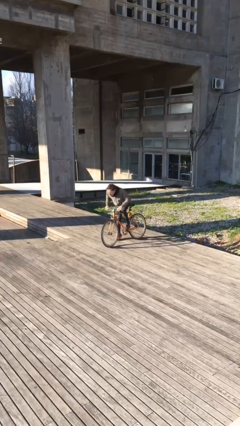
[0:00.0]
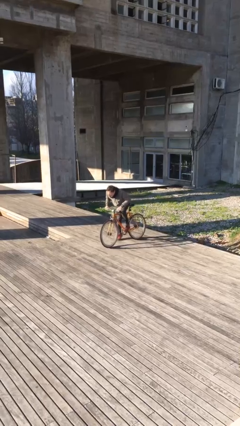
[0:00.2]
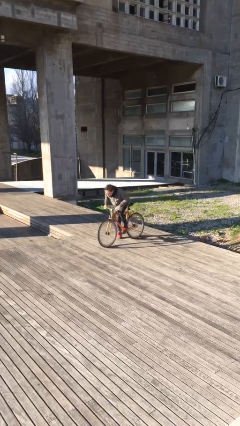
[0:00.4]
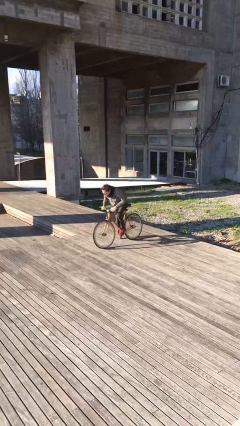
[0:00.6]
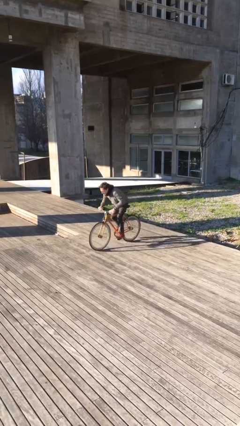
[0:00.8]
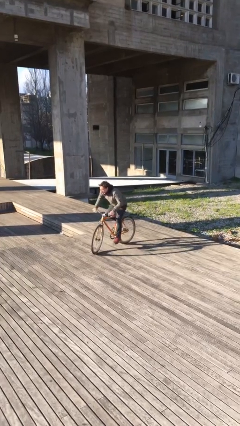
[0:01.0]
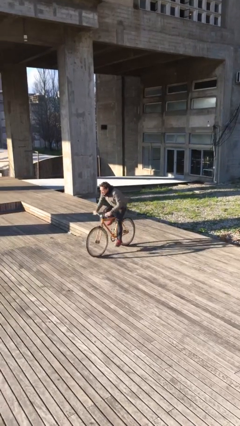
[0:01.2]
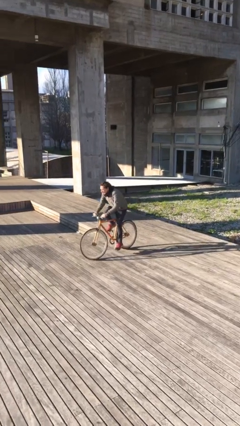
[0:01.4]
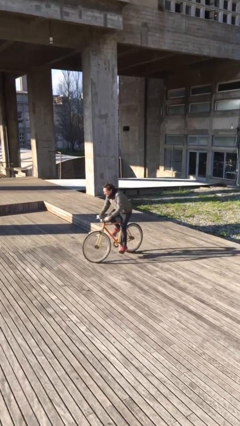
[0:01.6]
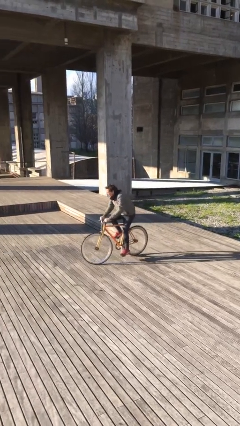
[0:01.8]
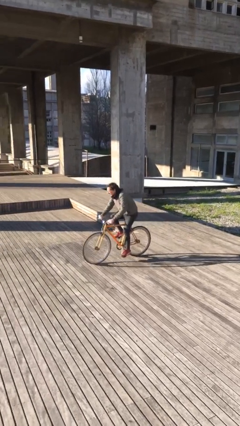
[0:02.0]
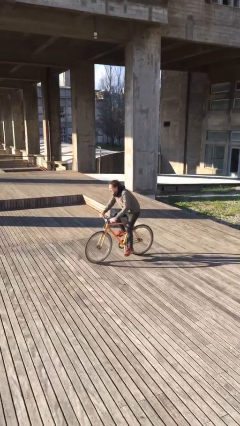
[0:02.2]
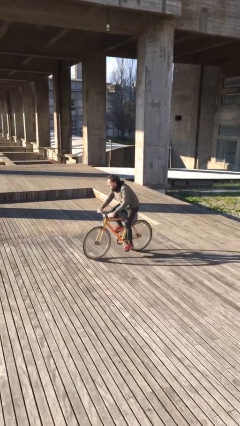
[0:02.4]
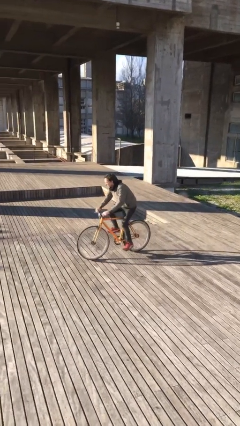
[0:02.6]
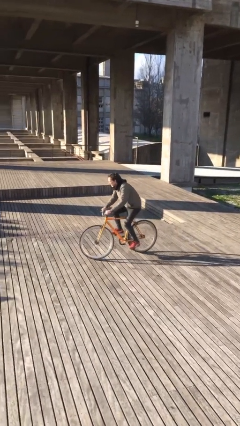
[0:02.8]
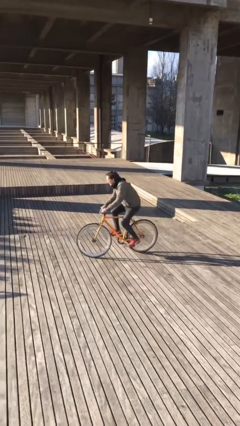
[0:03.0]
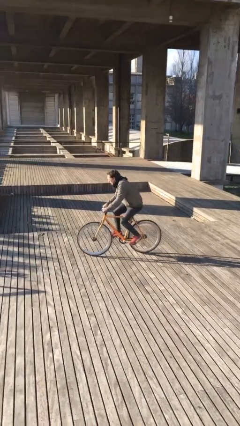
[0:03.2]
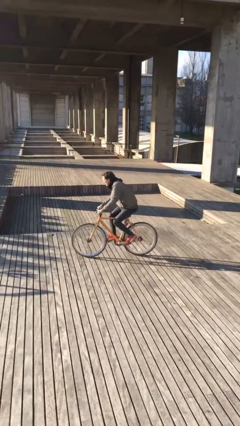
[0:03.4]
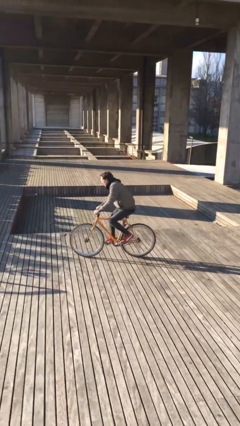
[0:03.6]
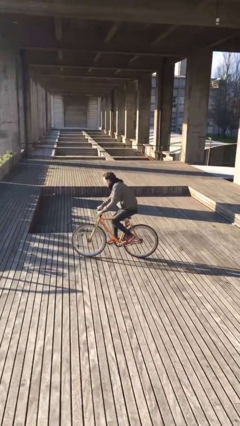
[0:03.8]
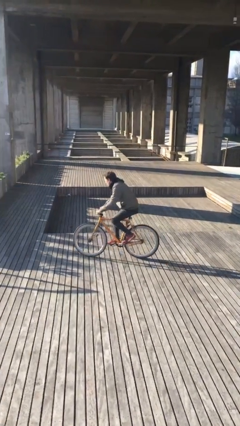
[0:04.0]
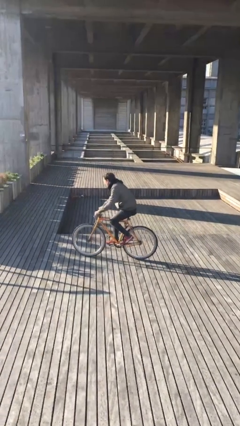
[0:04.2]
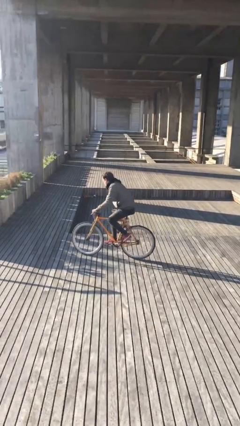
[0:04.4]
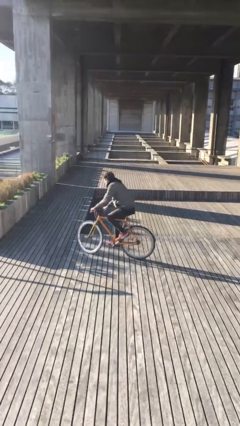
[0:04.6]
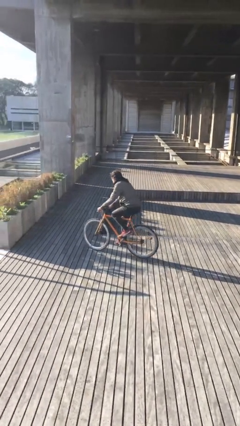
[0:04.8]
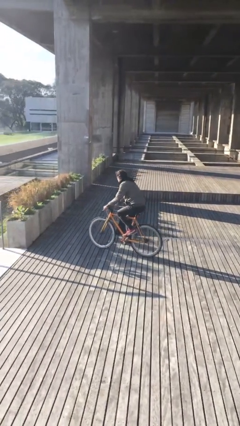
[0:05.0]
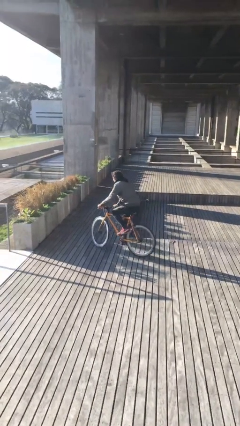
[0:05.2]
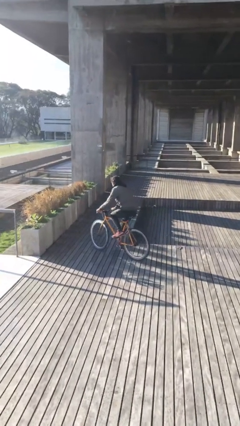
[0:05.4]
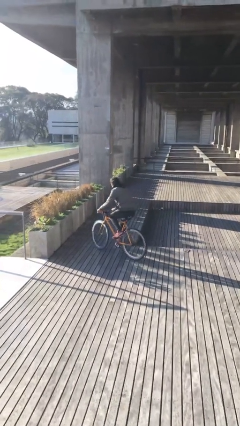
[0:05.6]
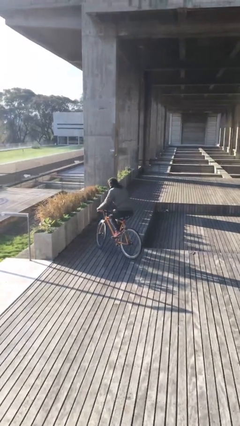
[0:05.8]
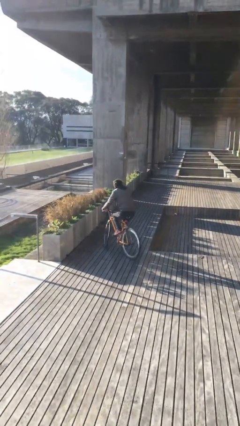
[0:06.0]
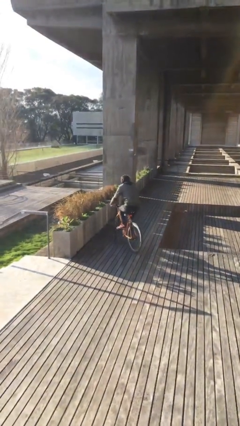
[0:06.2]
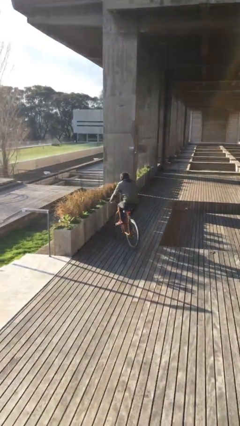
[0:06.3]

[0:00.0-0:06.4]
person rides bicycle

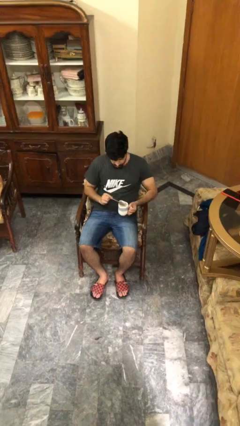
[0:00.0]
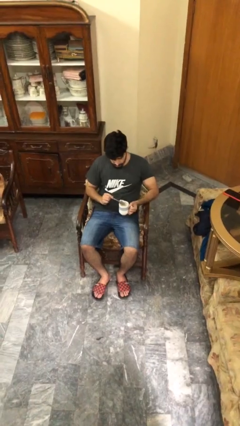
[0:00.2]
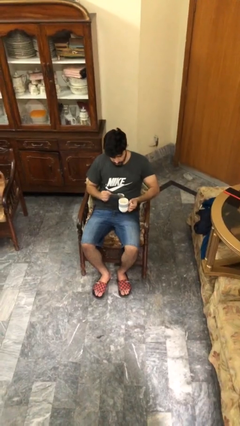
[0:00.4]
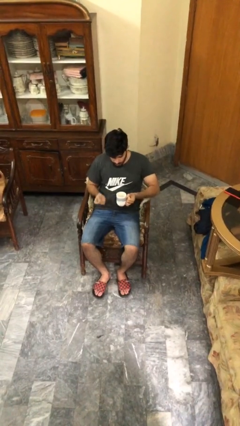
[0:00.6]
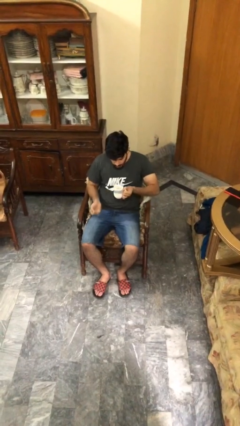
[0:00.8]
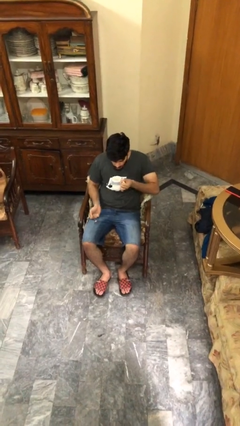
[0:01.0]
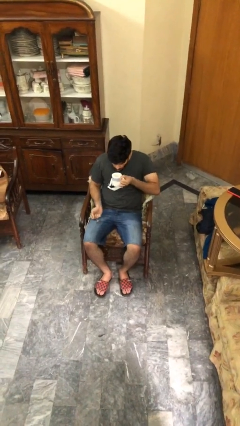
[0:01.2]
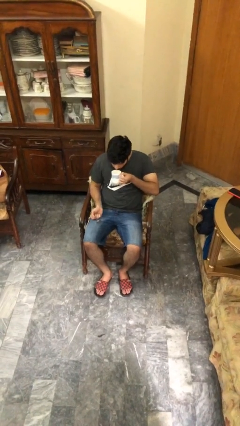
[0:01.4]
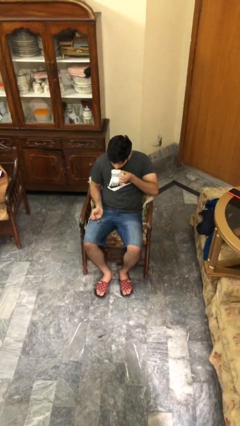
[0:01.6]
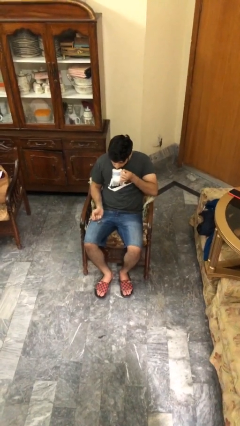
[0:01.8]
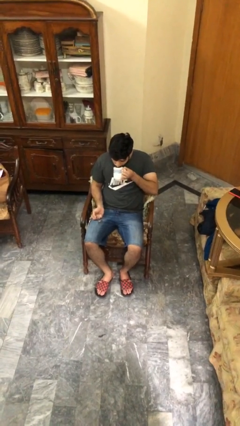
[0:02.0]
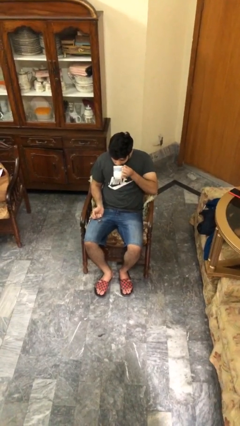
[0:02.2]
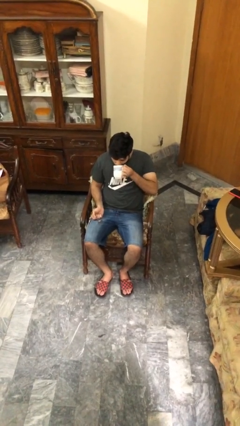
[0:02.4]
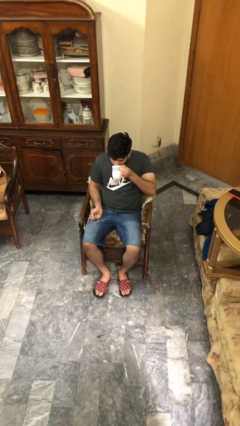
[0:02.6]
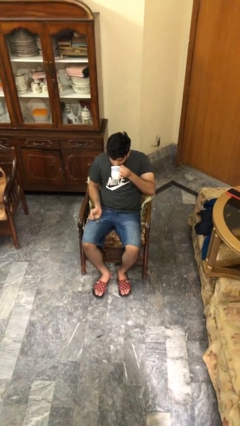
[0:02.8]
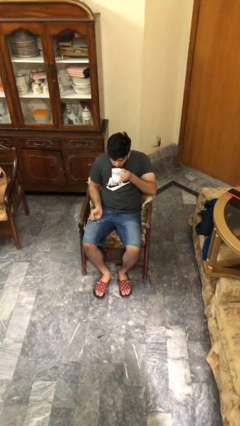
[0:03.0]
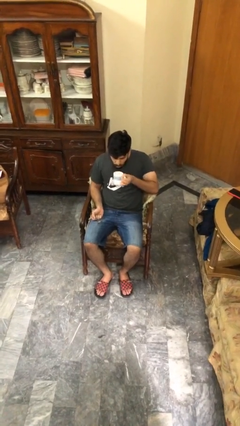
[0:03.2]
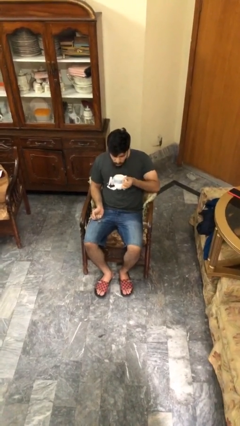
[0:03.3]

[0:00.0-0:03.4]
person drinks from mug

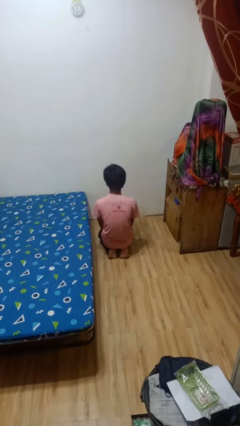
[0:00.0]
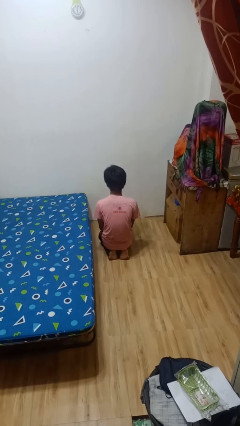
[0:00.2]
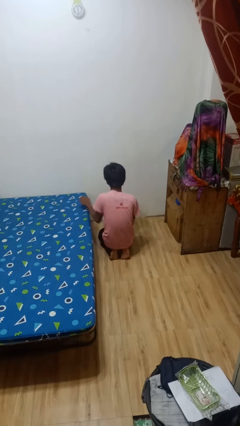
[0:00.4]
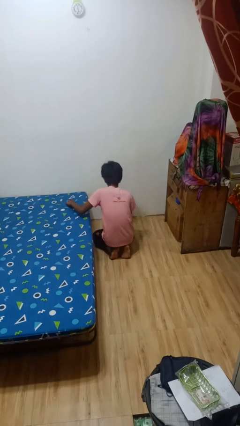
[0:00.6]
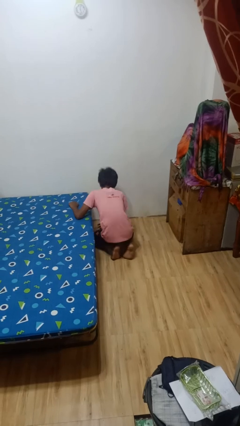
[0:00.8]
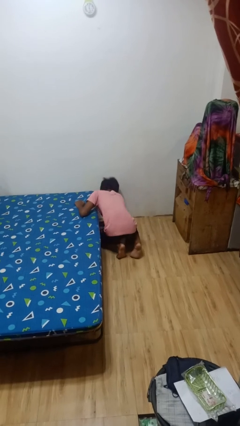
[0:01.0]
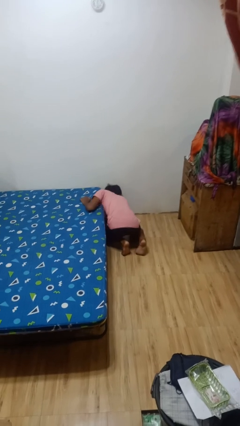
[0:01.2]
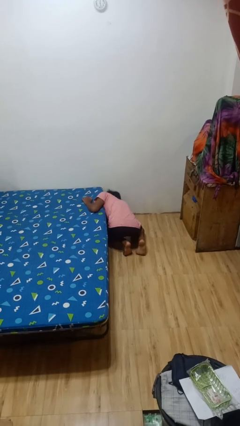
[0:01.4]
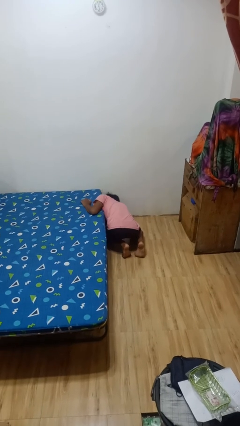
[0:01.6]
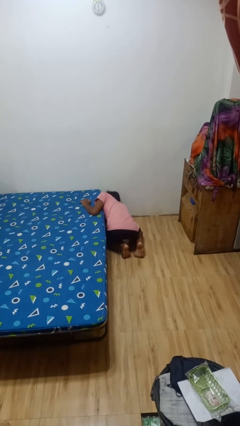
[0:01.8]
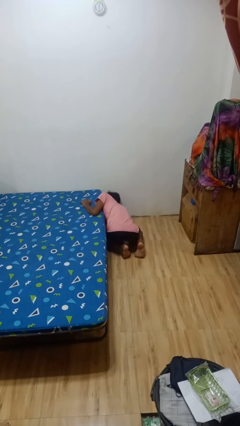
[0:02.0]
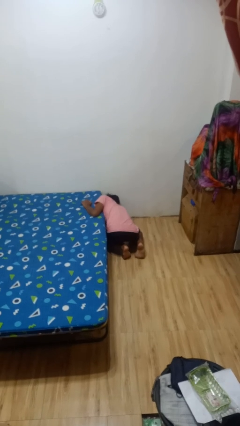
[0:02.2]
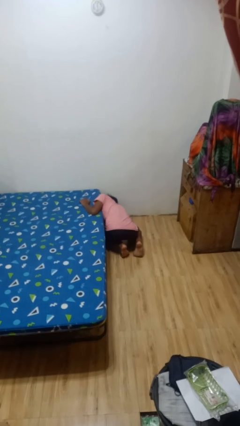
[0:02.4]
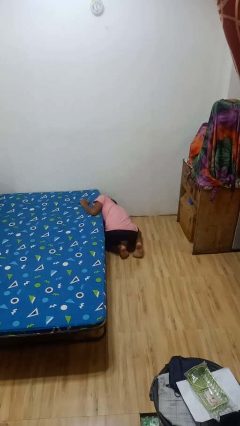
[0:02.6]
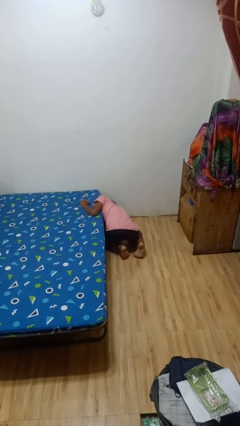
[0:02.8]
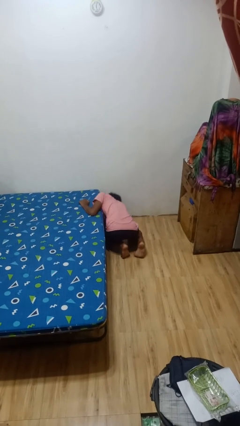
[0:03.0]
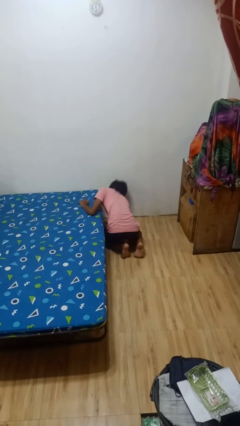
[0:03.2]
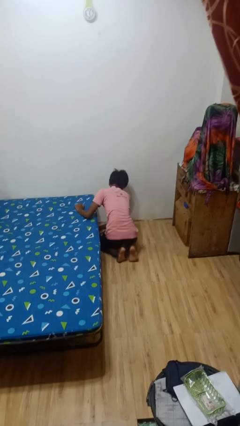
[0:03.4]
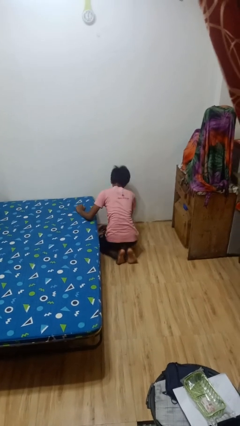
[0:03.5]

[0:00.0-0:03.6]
person searches under bed

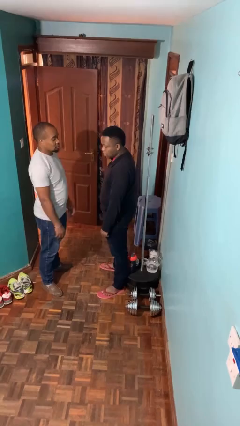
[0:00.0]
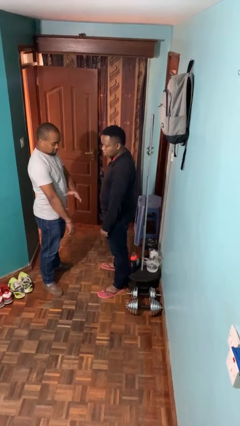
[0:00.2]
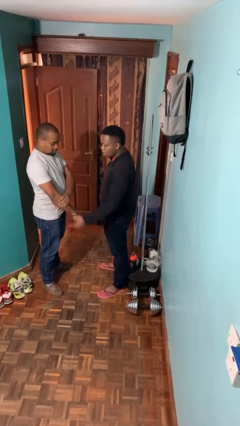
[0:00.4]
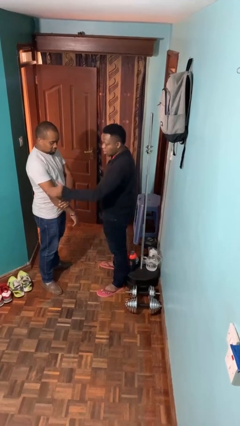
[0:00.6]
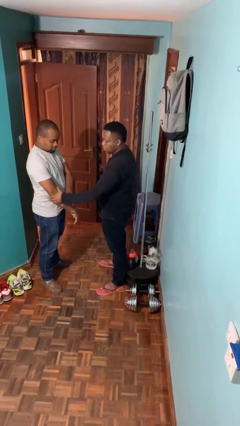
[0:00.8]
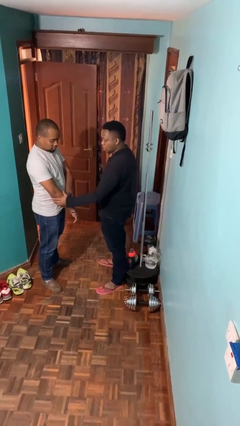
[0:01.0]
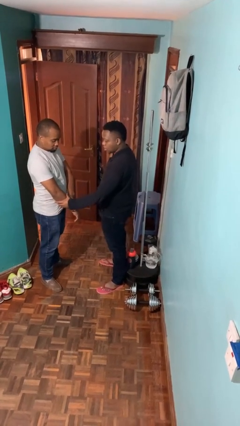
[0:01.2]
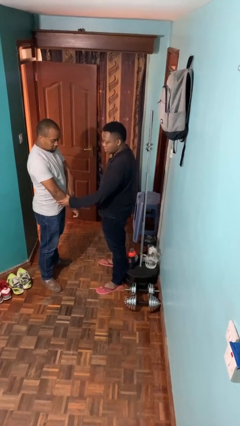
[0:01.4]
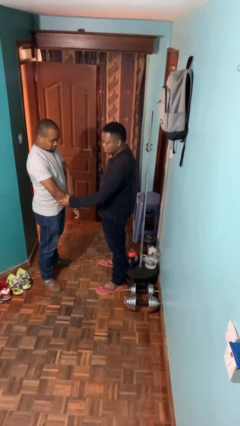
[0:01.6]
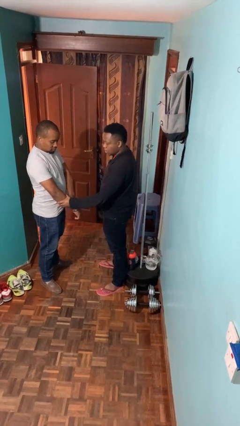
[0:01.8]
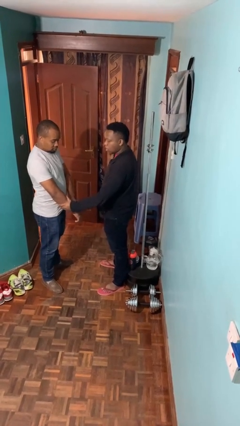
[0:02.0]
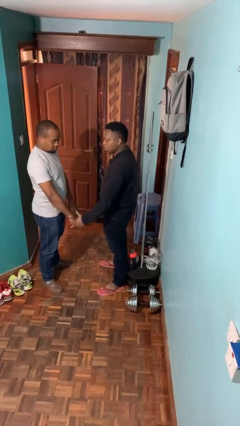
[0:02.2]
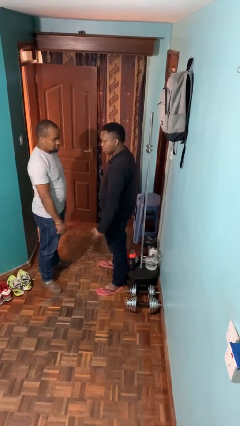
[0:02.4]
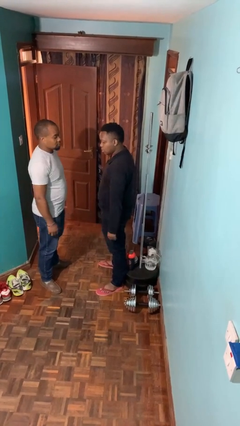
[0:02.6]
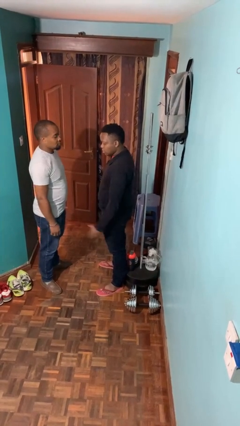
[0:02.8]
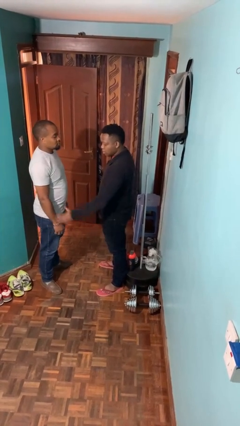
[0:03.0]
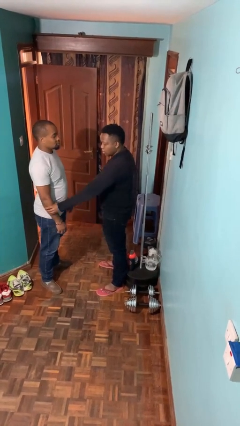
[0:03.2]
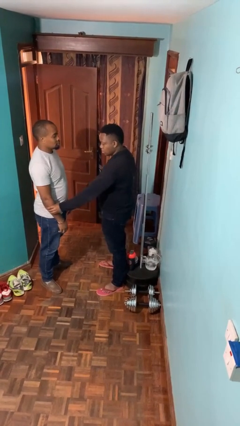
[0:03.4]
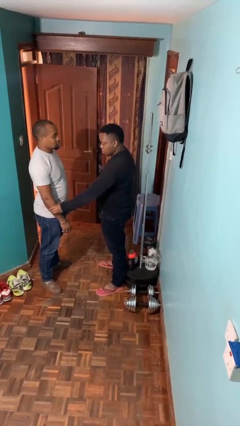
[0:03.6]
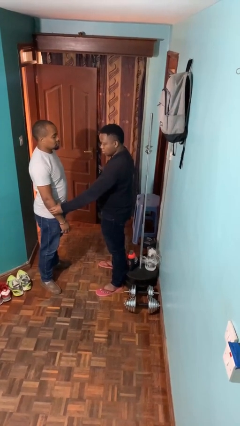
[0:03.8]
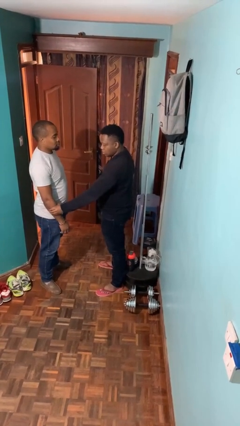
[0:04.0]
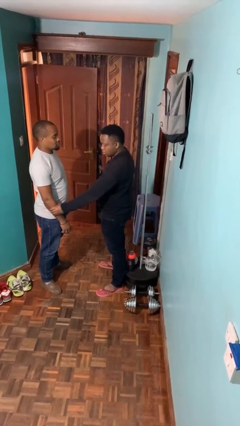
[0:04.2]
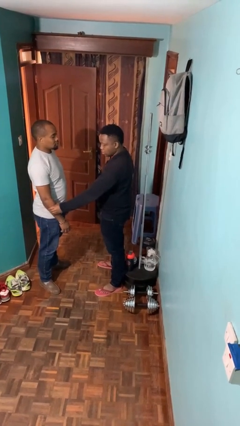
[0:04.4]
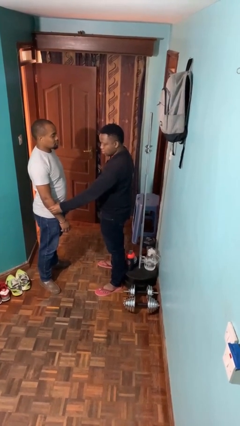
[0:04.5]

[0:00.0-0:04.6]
person grabs person by forearm
